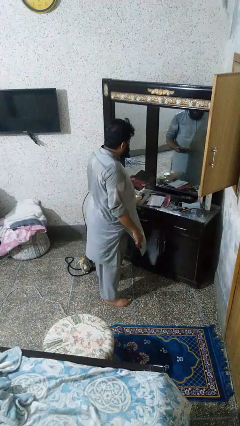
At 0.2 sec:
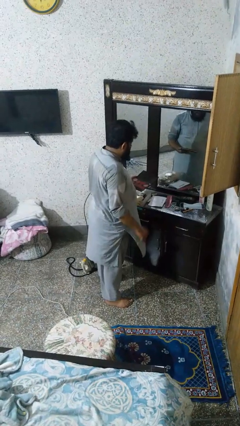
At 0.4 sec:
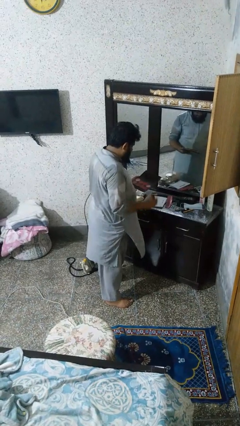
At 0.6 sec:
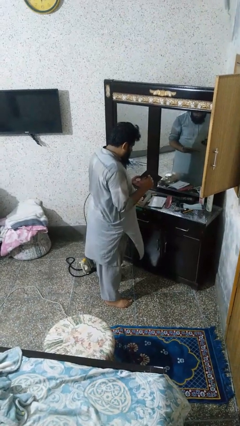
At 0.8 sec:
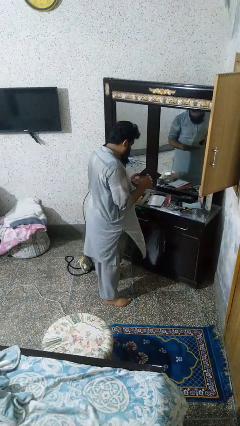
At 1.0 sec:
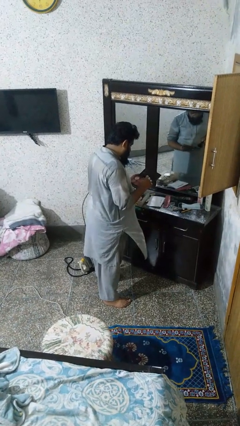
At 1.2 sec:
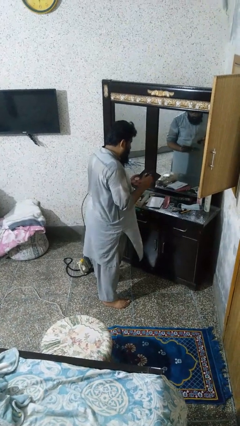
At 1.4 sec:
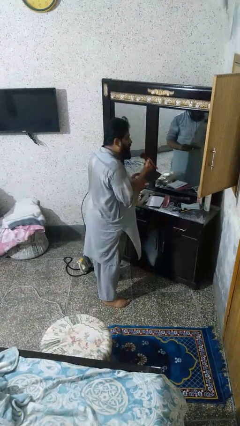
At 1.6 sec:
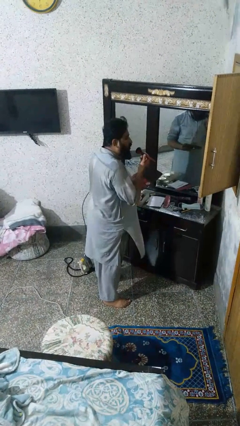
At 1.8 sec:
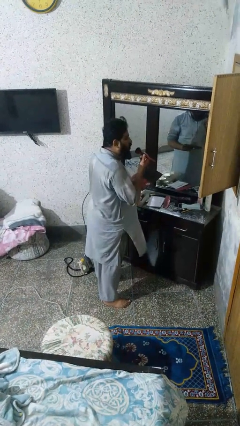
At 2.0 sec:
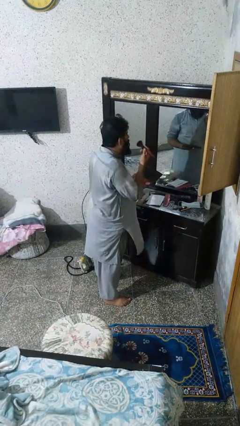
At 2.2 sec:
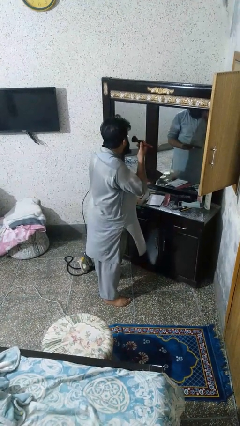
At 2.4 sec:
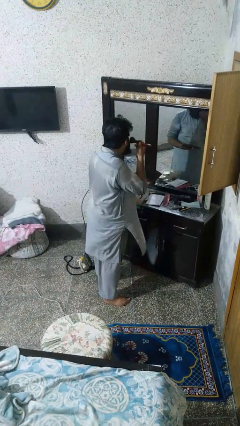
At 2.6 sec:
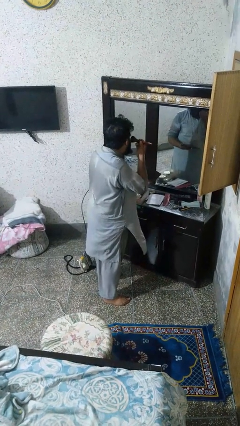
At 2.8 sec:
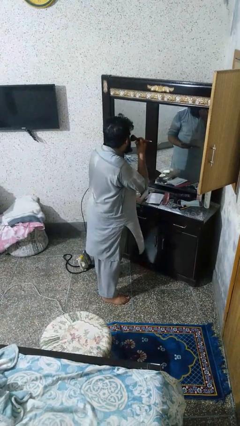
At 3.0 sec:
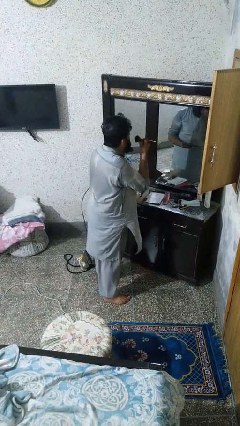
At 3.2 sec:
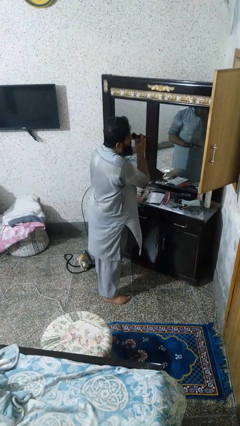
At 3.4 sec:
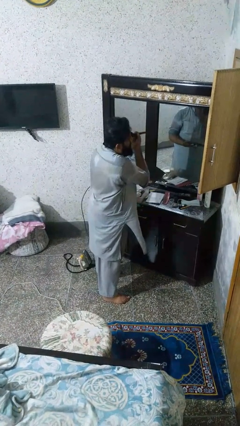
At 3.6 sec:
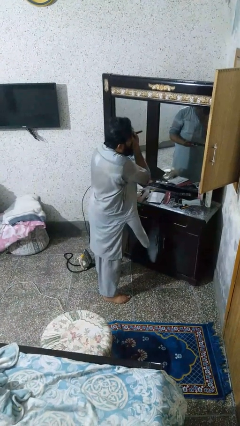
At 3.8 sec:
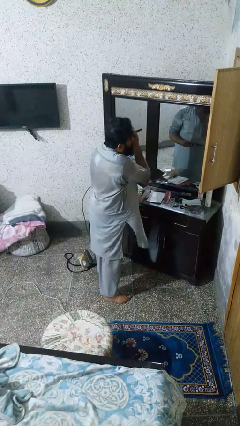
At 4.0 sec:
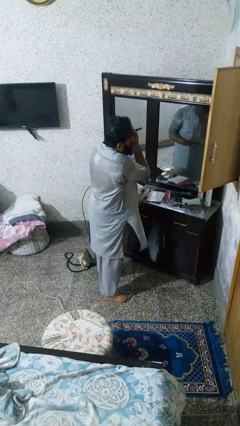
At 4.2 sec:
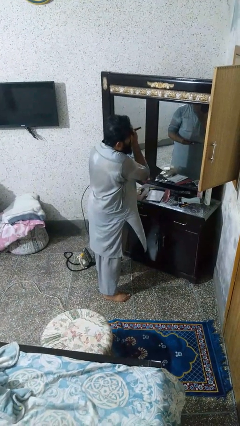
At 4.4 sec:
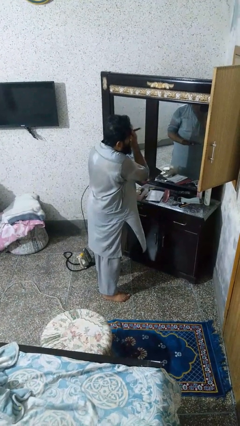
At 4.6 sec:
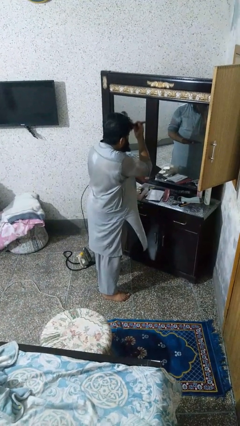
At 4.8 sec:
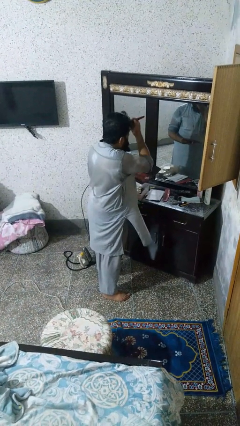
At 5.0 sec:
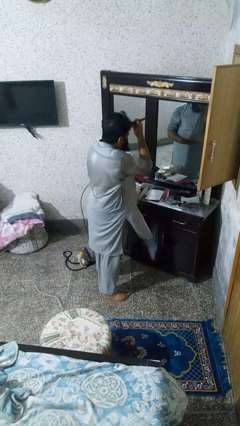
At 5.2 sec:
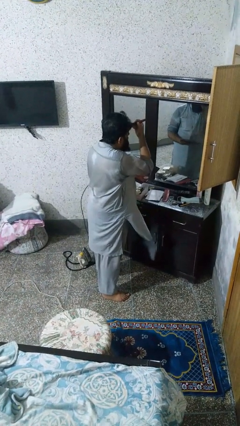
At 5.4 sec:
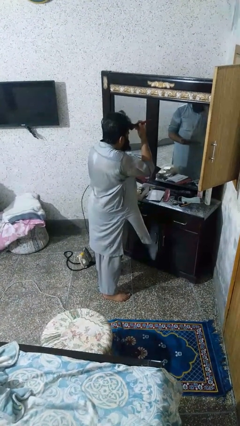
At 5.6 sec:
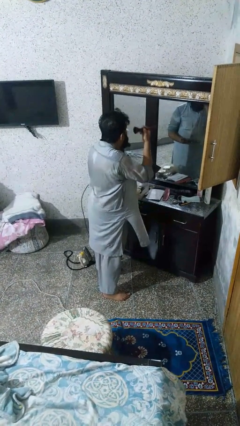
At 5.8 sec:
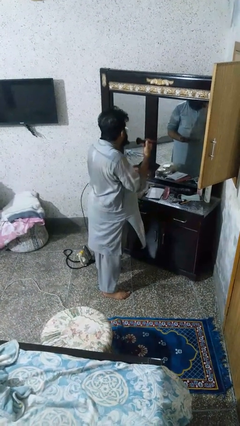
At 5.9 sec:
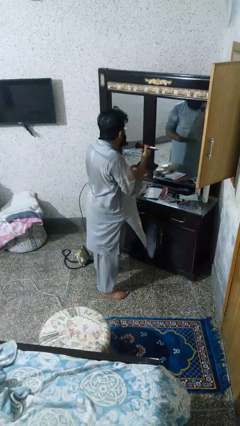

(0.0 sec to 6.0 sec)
person applies foundation makeup

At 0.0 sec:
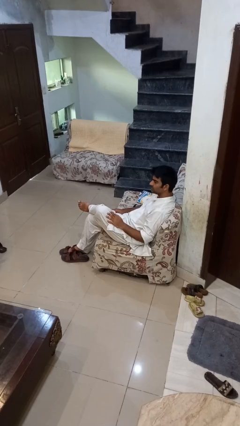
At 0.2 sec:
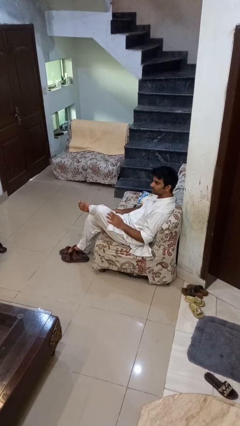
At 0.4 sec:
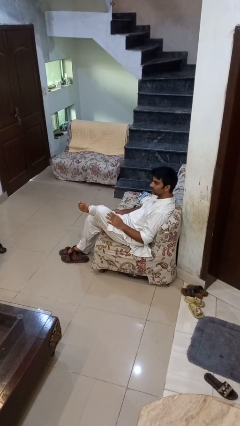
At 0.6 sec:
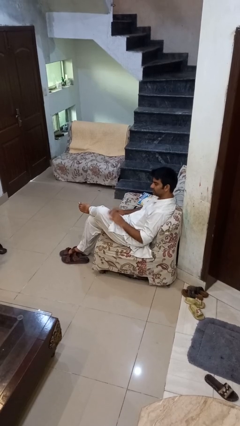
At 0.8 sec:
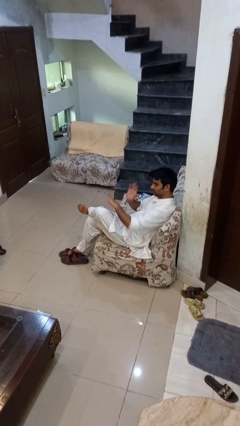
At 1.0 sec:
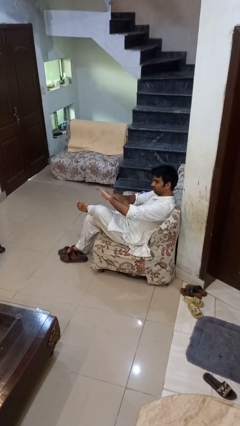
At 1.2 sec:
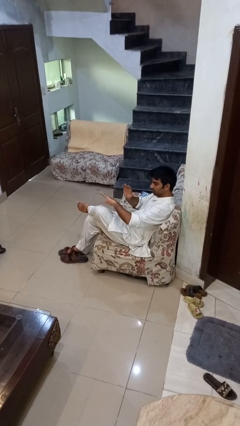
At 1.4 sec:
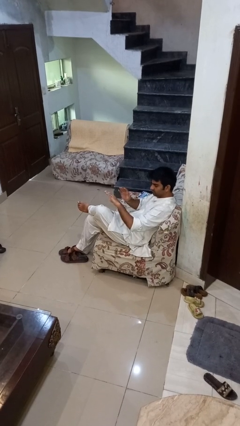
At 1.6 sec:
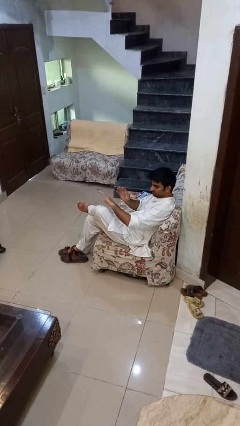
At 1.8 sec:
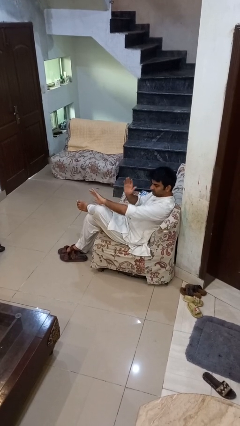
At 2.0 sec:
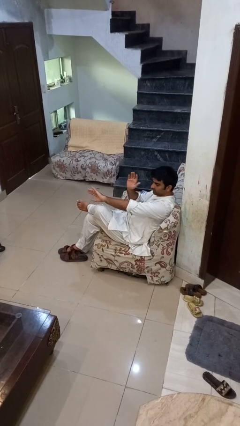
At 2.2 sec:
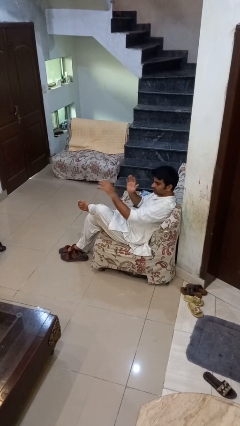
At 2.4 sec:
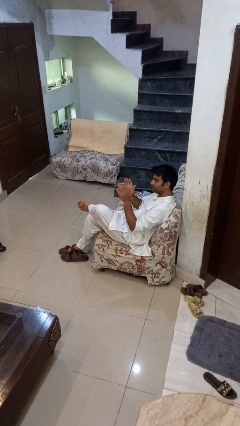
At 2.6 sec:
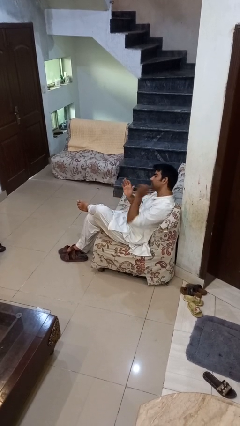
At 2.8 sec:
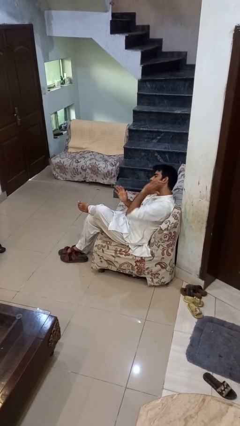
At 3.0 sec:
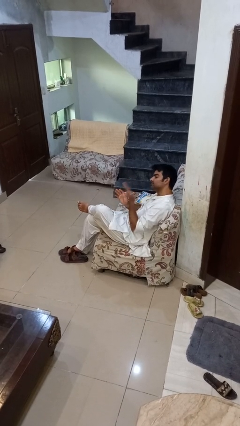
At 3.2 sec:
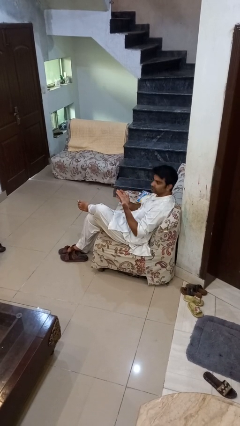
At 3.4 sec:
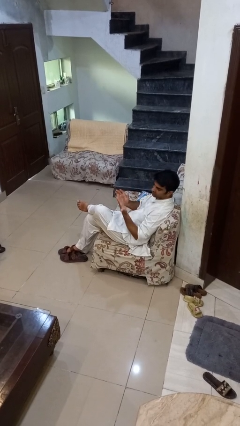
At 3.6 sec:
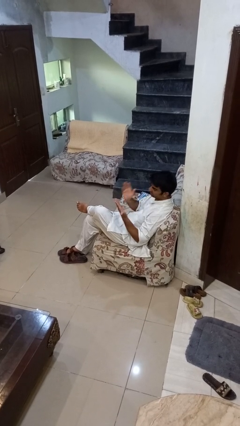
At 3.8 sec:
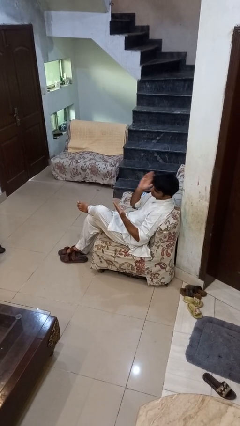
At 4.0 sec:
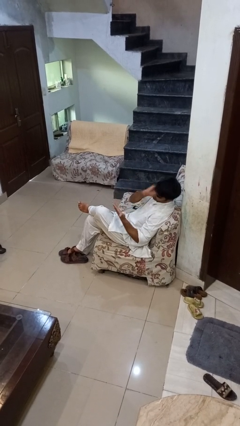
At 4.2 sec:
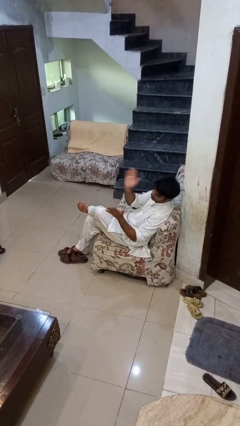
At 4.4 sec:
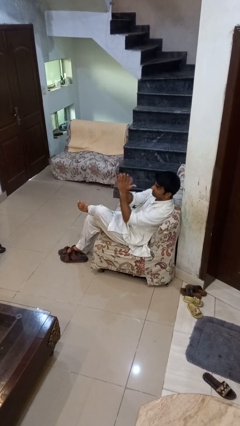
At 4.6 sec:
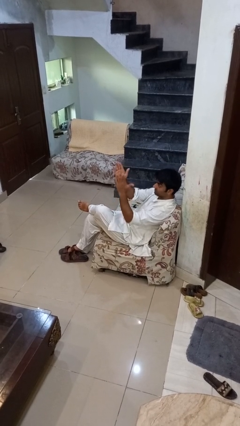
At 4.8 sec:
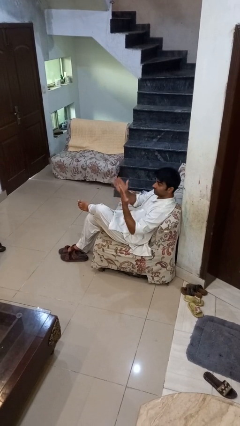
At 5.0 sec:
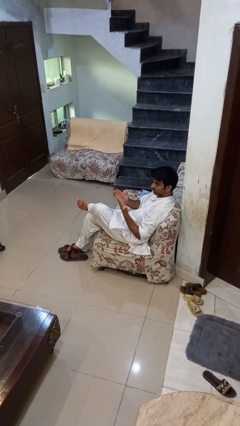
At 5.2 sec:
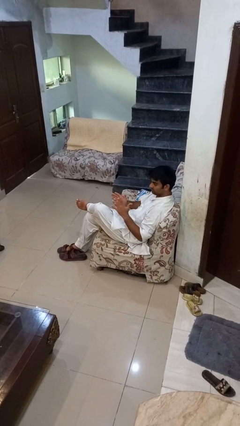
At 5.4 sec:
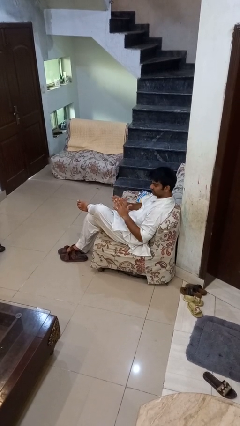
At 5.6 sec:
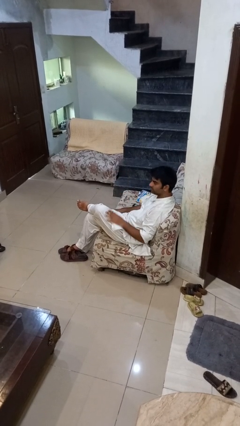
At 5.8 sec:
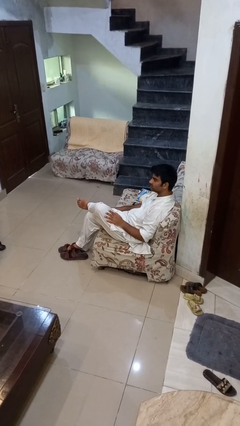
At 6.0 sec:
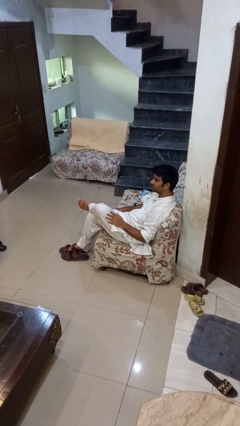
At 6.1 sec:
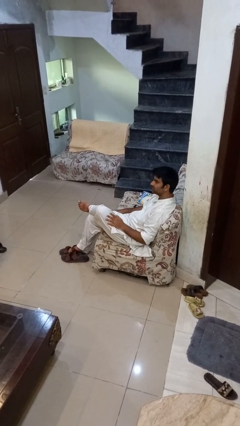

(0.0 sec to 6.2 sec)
person swats bug

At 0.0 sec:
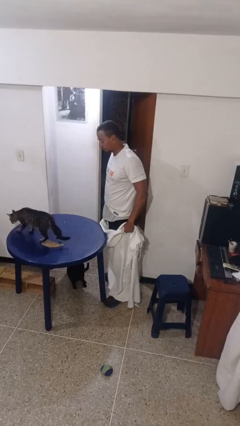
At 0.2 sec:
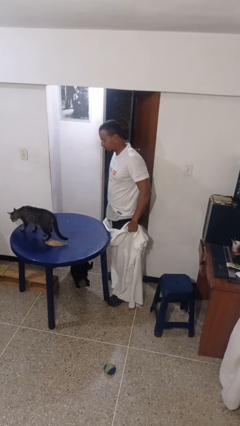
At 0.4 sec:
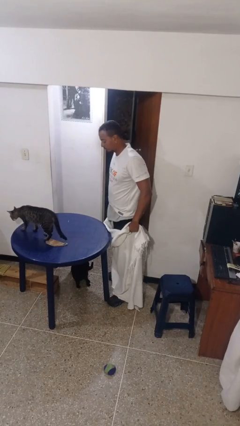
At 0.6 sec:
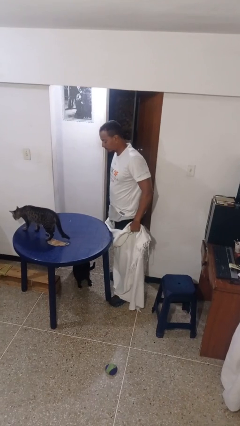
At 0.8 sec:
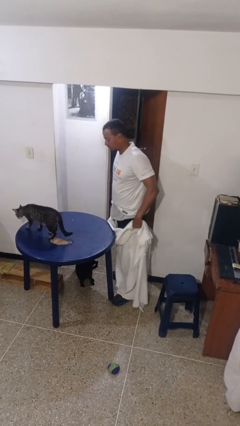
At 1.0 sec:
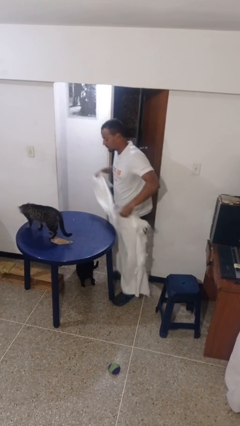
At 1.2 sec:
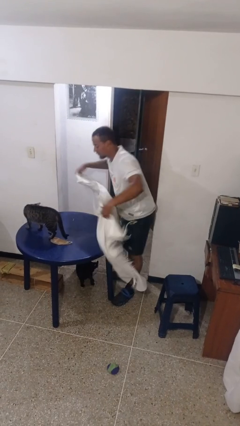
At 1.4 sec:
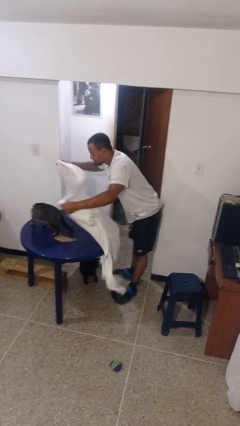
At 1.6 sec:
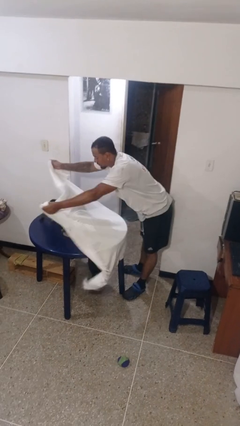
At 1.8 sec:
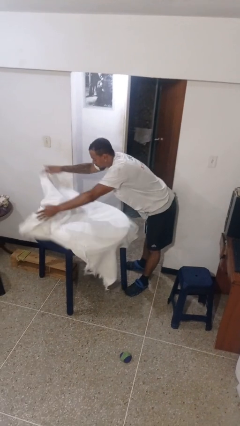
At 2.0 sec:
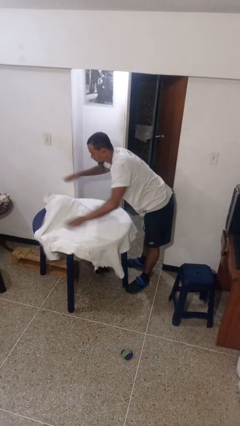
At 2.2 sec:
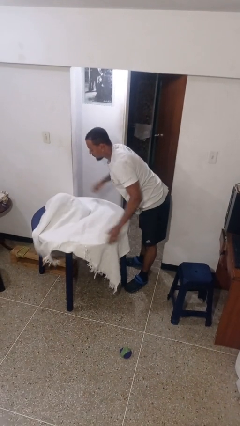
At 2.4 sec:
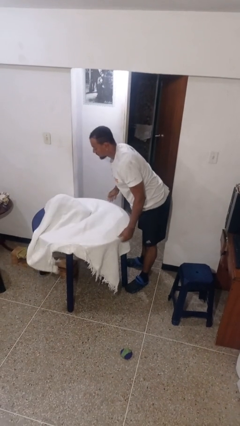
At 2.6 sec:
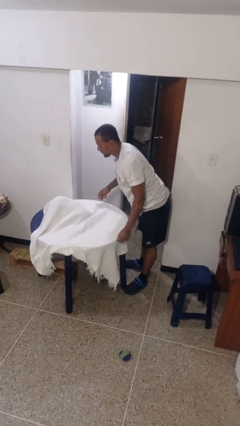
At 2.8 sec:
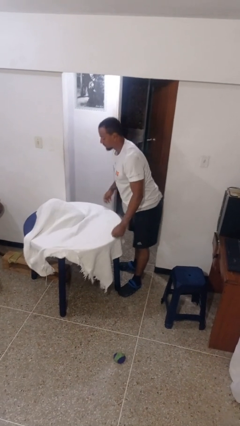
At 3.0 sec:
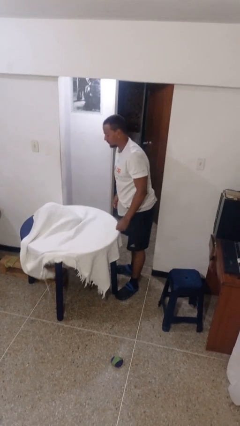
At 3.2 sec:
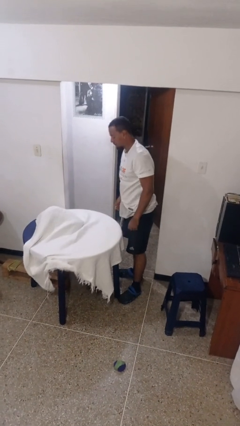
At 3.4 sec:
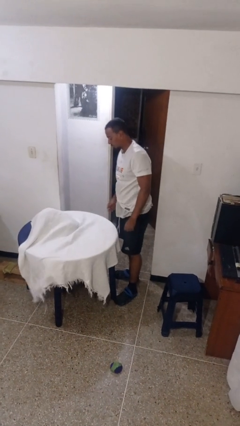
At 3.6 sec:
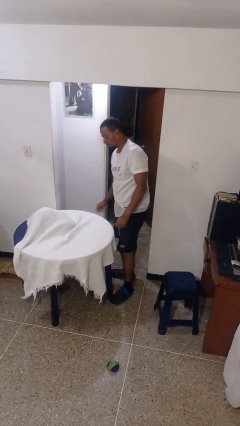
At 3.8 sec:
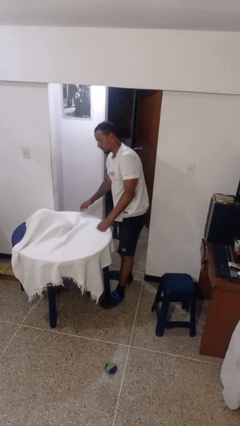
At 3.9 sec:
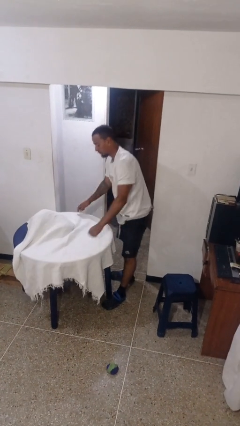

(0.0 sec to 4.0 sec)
person spreads tablecloth

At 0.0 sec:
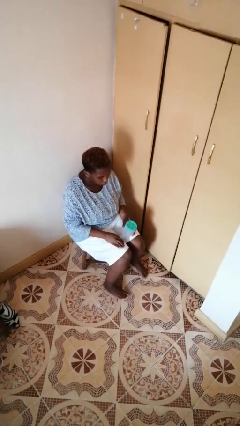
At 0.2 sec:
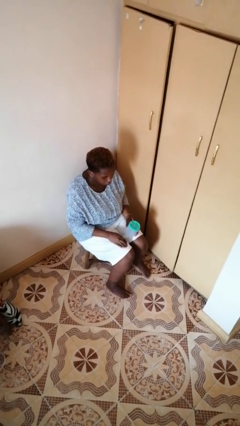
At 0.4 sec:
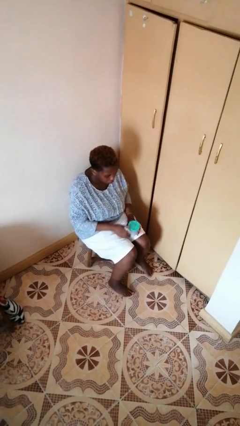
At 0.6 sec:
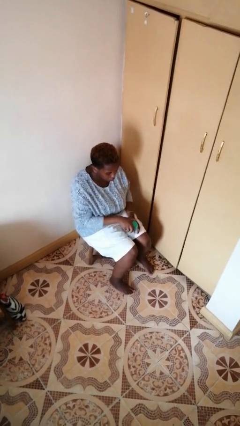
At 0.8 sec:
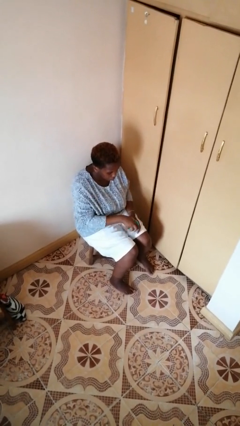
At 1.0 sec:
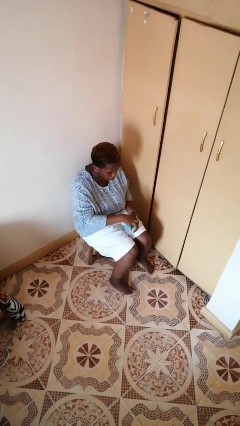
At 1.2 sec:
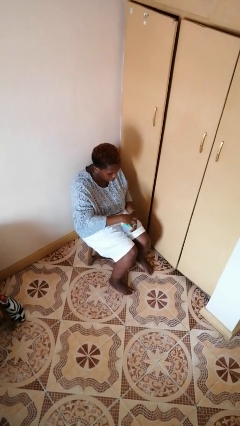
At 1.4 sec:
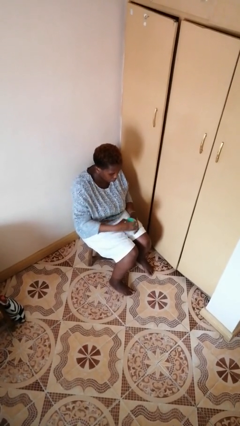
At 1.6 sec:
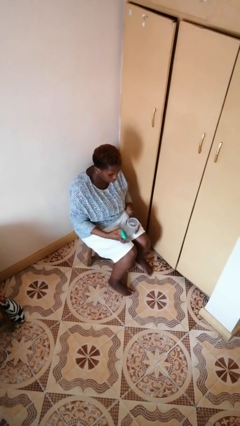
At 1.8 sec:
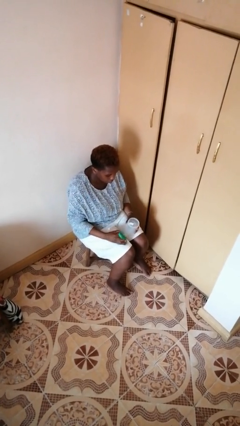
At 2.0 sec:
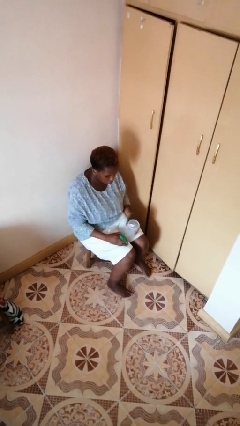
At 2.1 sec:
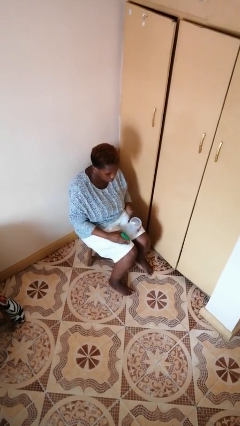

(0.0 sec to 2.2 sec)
person opens jar
